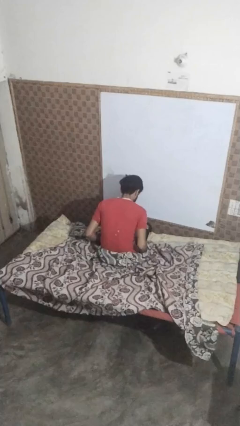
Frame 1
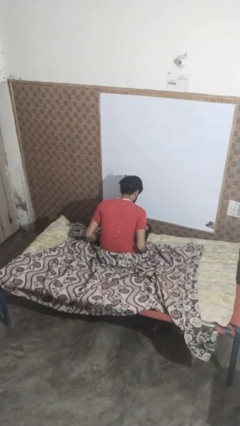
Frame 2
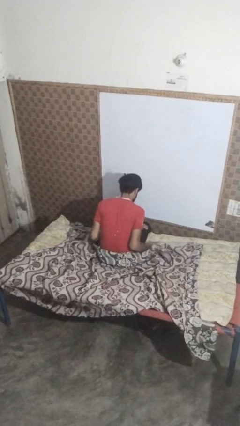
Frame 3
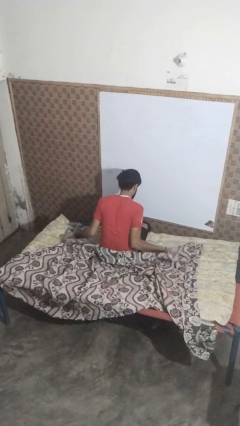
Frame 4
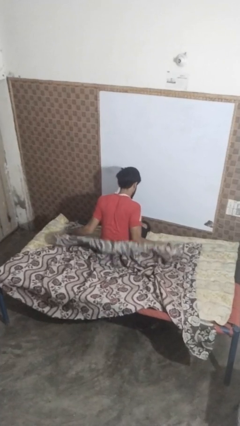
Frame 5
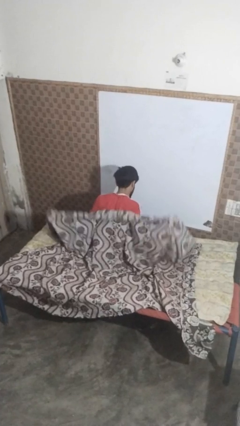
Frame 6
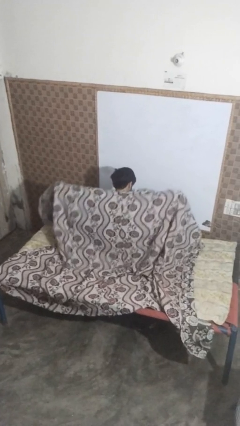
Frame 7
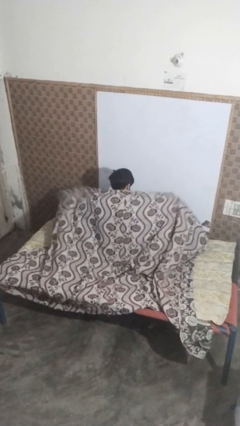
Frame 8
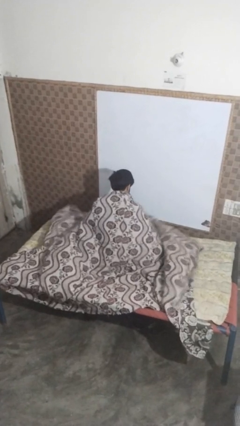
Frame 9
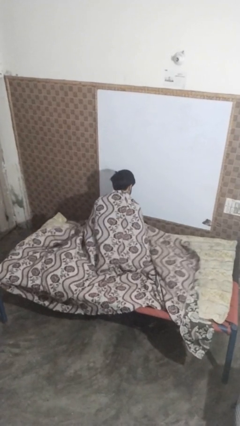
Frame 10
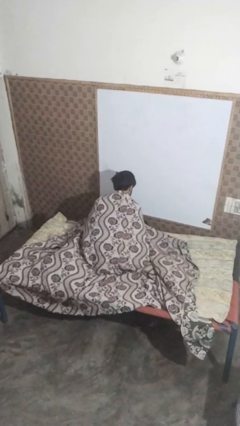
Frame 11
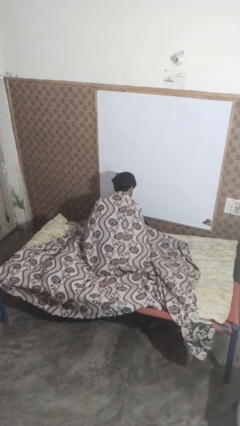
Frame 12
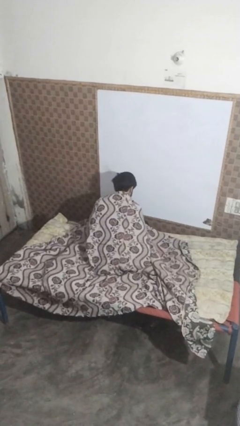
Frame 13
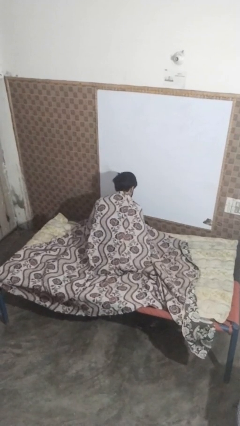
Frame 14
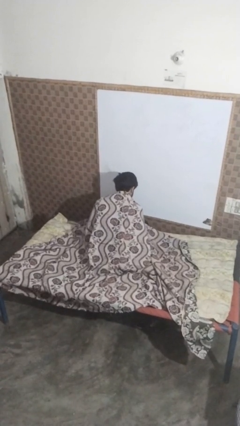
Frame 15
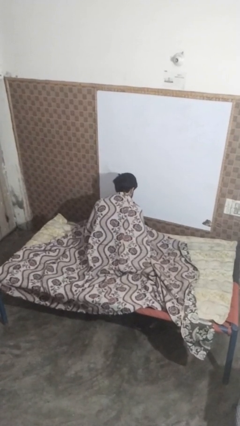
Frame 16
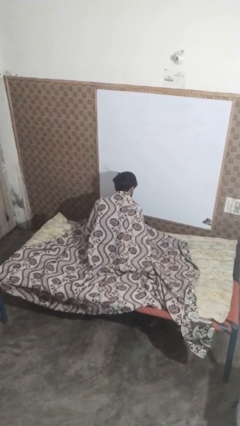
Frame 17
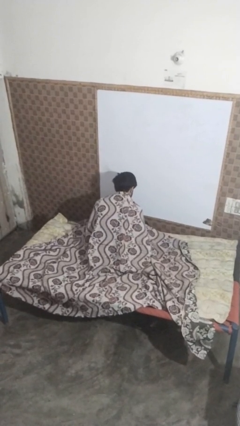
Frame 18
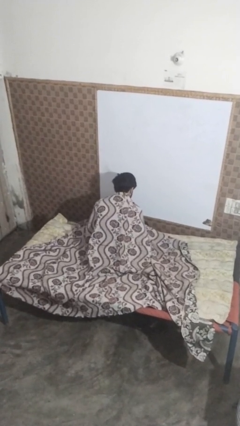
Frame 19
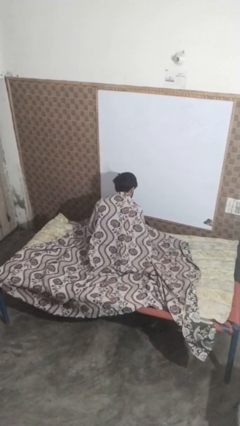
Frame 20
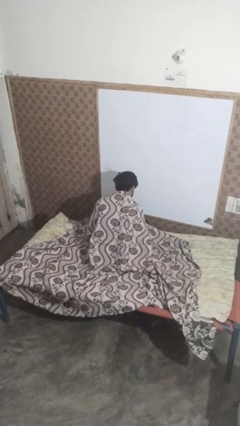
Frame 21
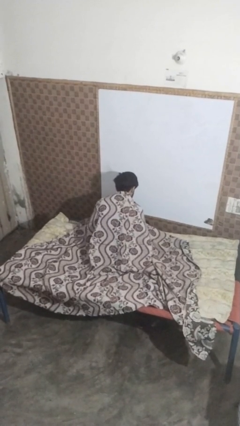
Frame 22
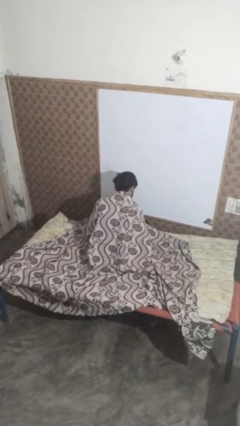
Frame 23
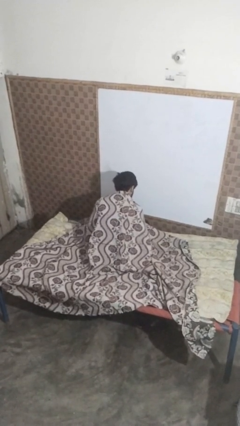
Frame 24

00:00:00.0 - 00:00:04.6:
person covers with blanket

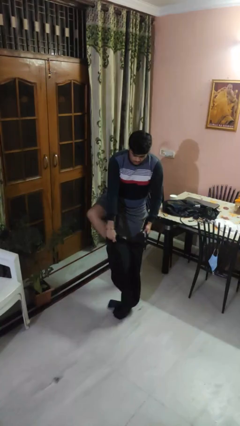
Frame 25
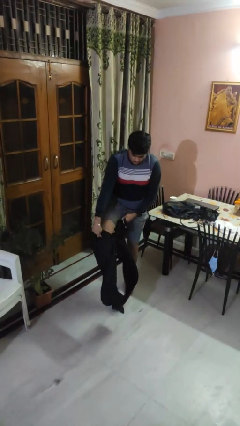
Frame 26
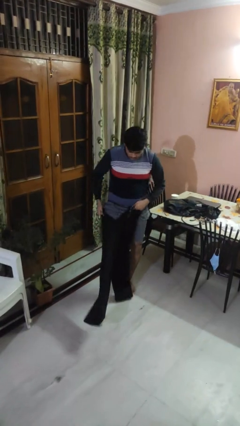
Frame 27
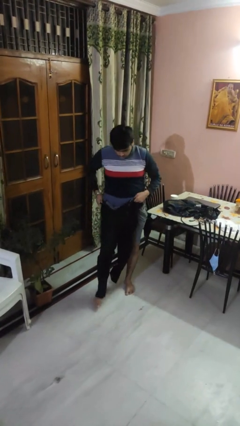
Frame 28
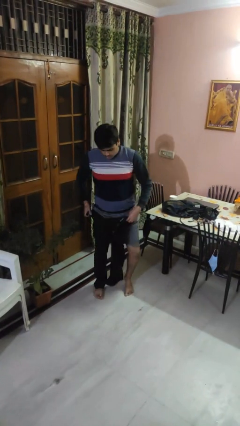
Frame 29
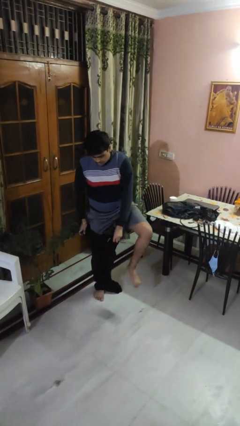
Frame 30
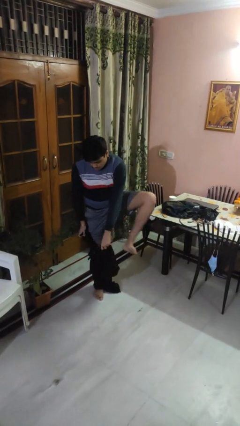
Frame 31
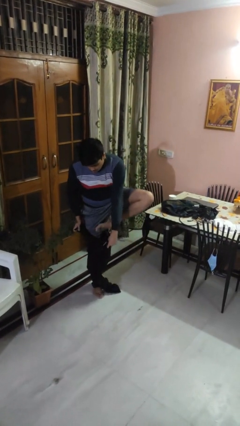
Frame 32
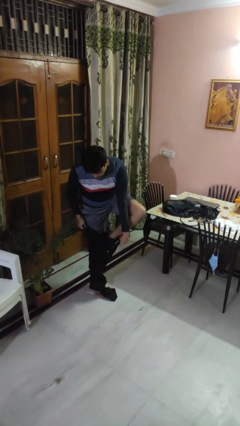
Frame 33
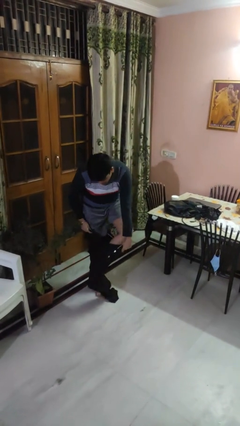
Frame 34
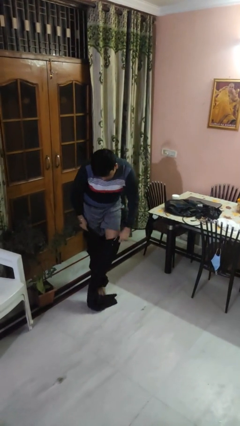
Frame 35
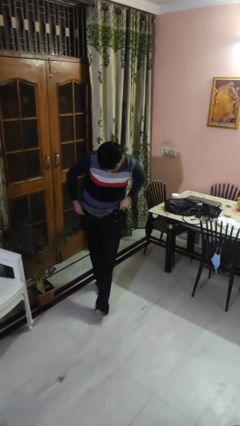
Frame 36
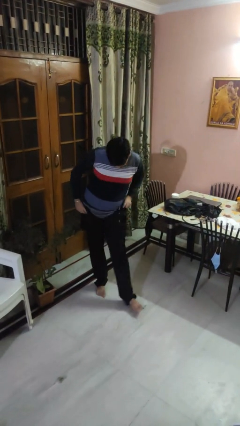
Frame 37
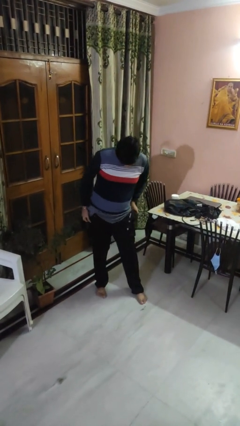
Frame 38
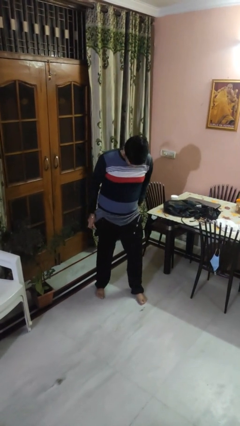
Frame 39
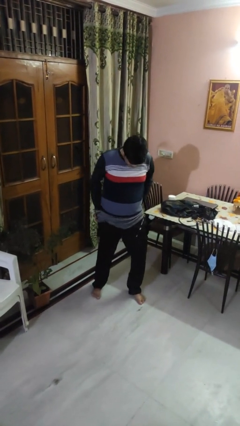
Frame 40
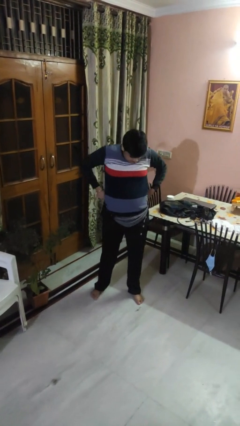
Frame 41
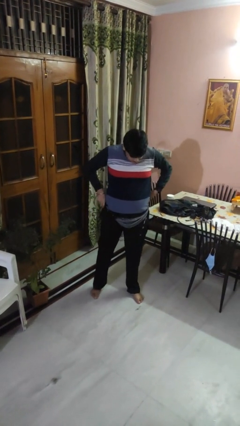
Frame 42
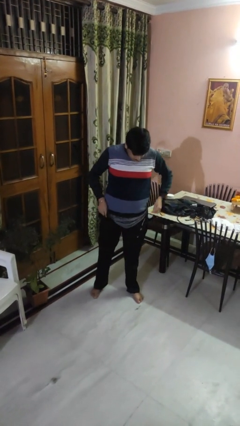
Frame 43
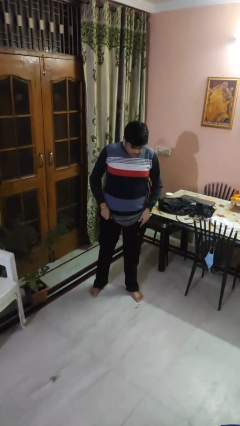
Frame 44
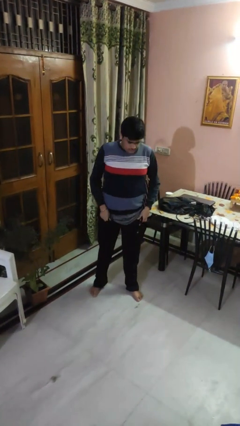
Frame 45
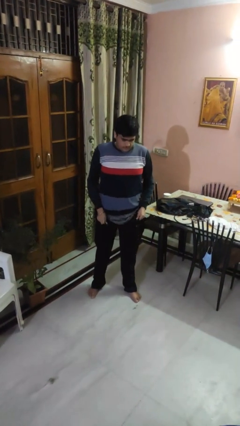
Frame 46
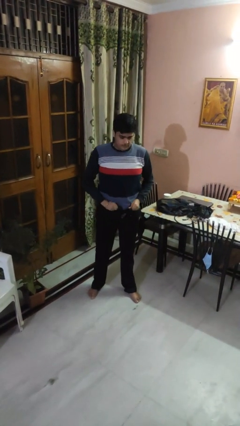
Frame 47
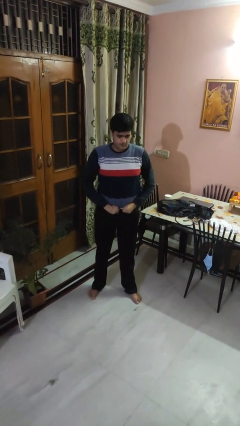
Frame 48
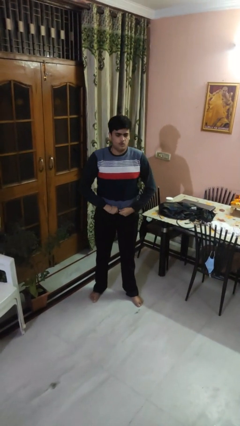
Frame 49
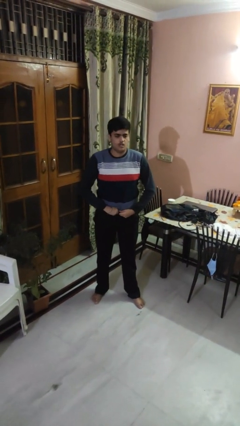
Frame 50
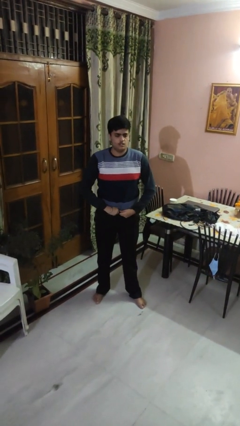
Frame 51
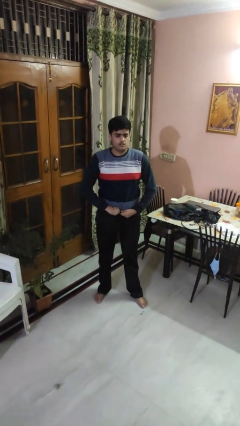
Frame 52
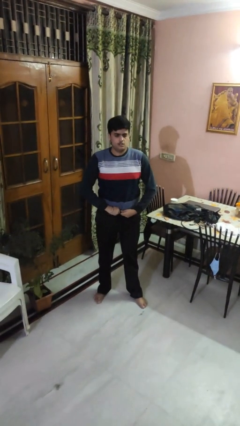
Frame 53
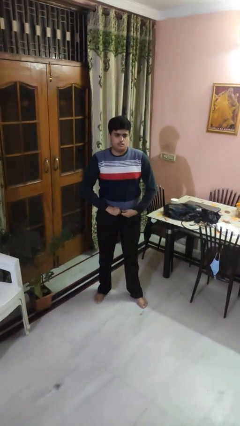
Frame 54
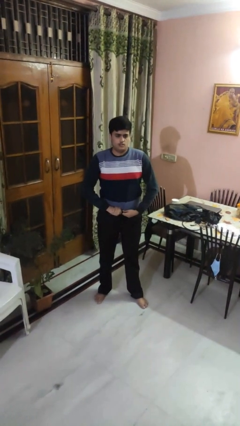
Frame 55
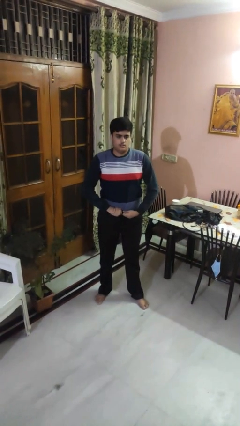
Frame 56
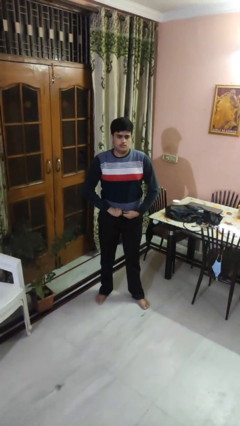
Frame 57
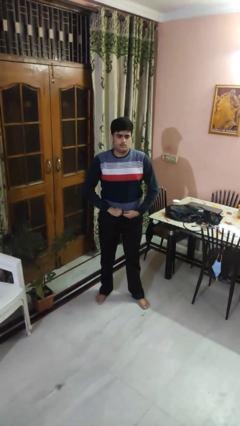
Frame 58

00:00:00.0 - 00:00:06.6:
person puts on pants

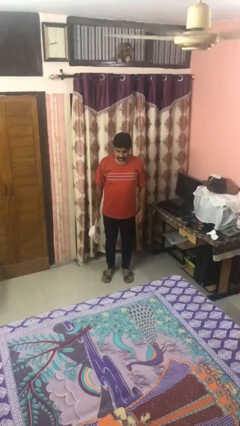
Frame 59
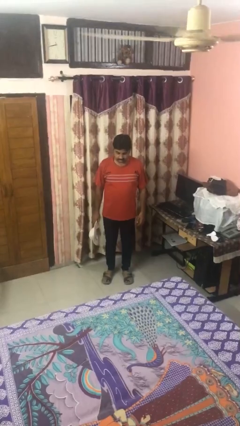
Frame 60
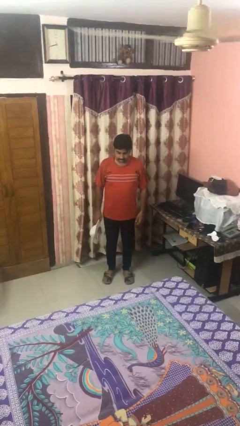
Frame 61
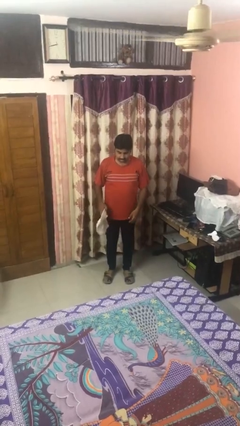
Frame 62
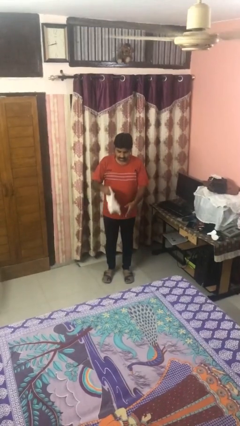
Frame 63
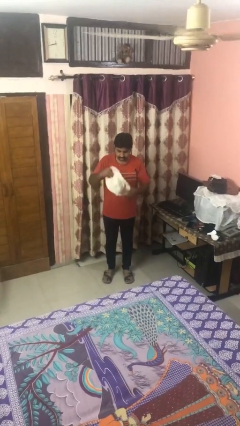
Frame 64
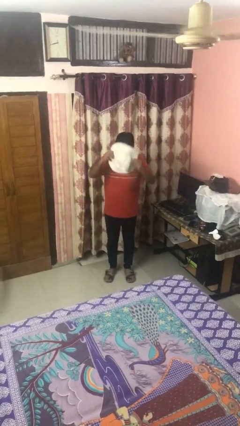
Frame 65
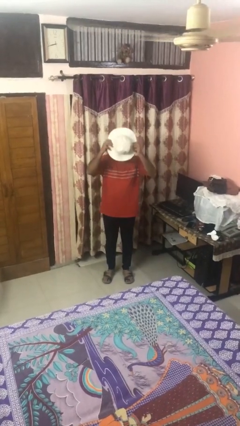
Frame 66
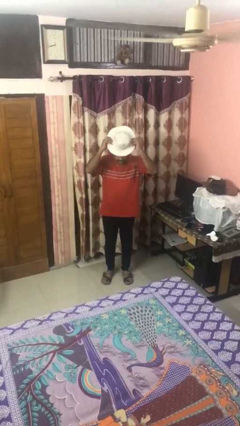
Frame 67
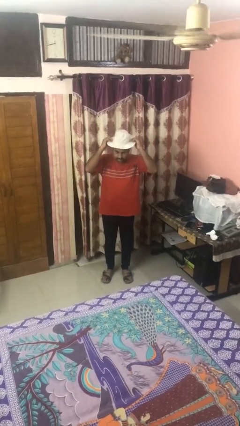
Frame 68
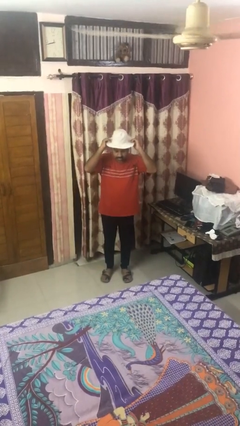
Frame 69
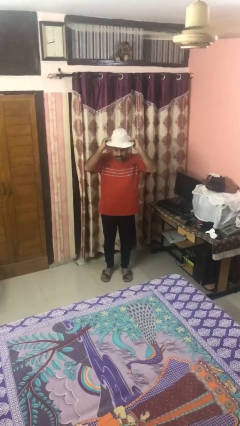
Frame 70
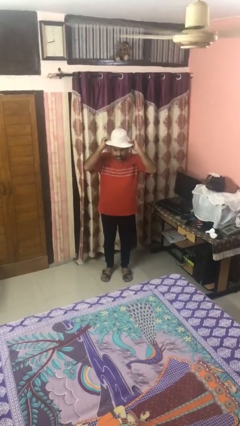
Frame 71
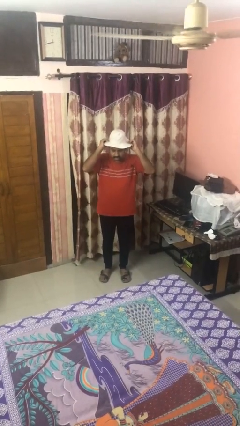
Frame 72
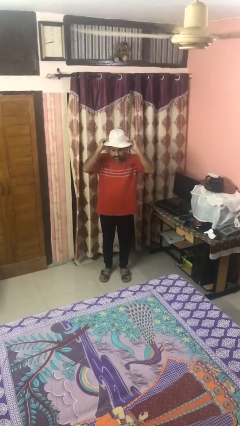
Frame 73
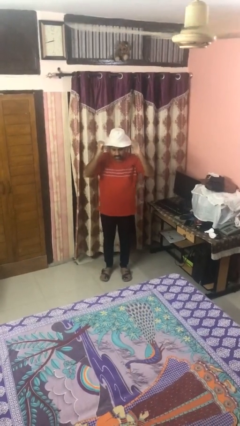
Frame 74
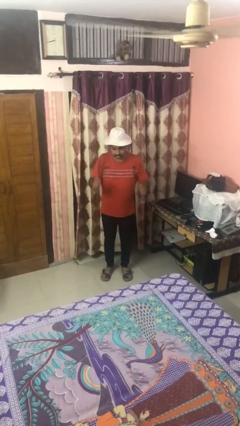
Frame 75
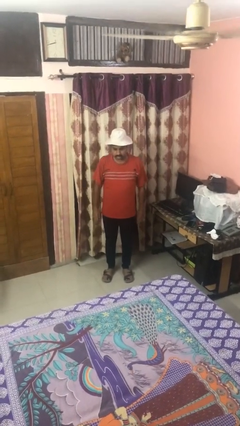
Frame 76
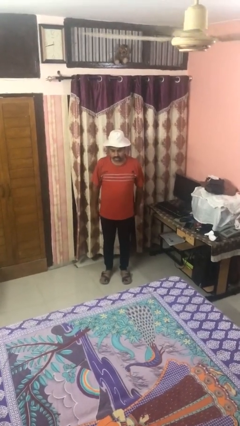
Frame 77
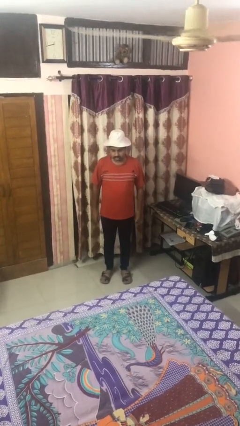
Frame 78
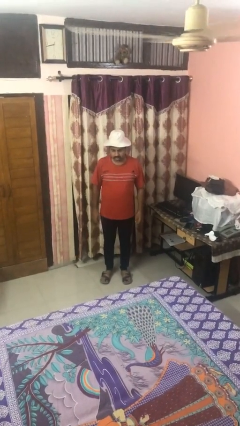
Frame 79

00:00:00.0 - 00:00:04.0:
person puts on hat

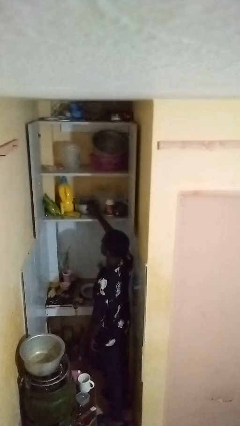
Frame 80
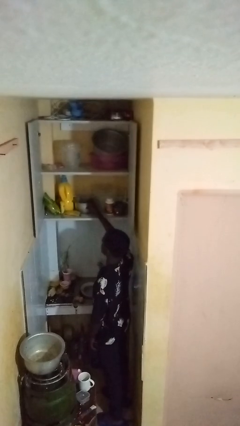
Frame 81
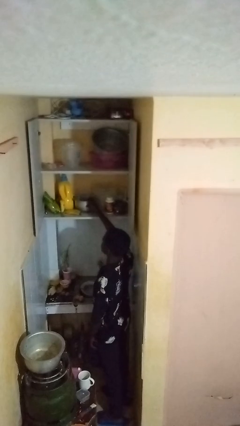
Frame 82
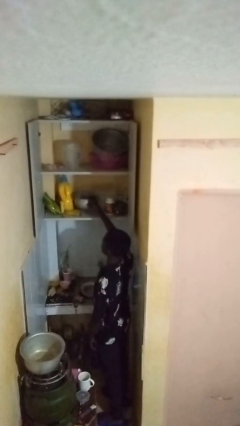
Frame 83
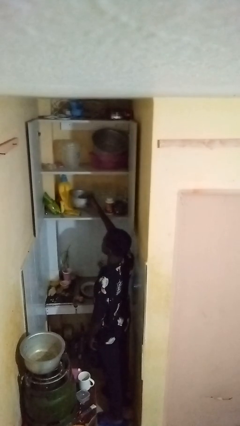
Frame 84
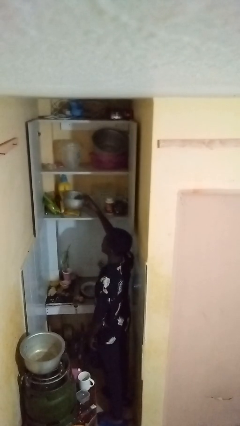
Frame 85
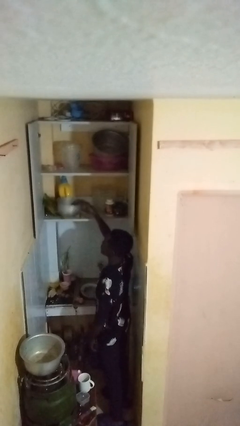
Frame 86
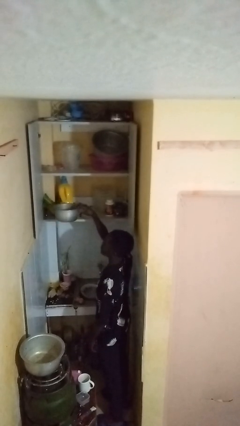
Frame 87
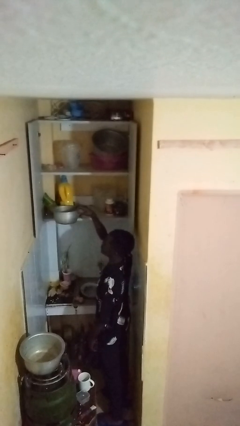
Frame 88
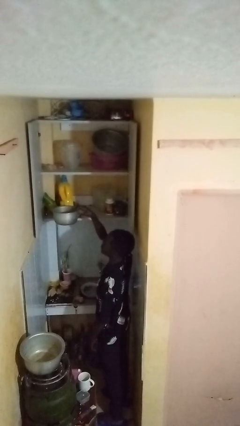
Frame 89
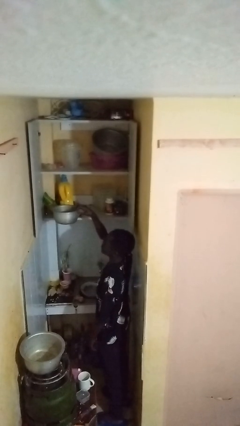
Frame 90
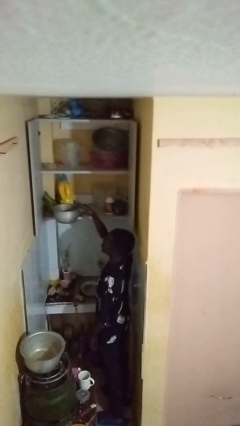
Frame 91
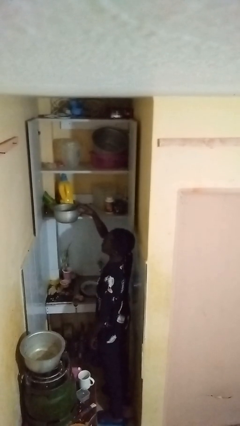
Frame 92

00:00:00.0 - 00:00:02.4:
person takes object from cabinet
